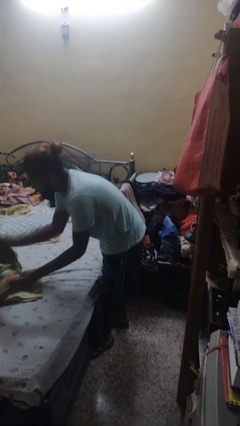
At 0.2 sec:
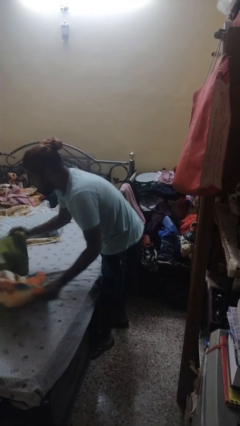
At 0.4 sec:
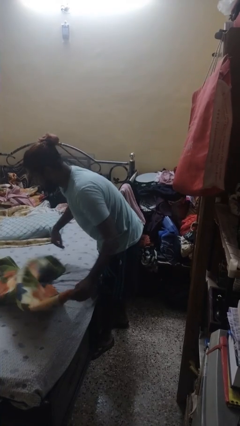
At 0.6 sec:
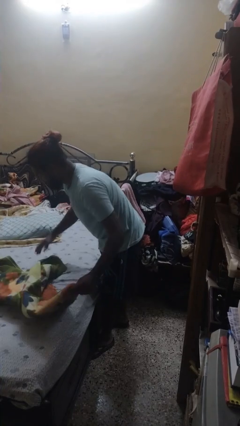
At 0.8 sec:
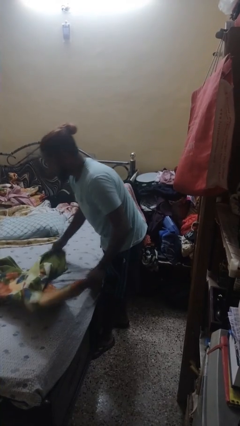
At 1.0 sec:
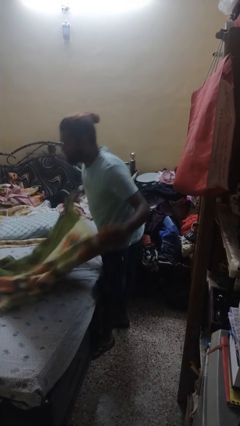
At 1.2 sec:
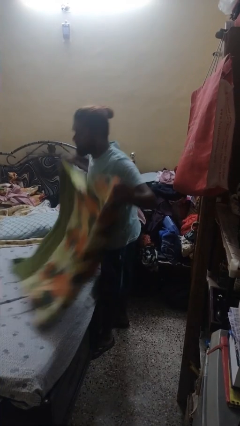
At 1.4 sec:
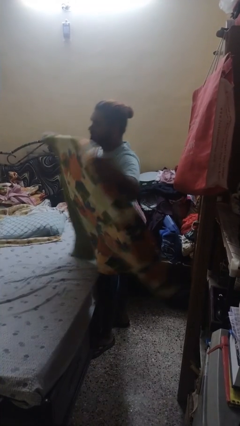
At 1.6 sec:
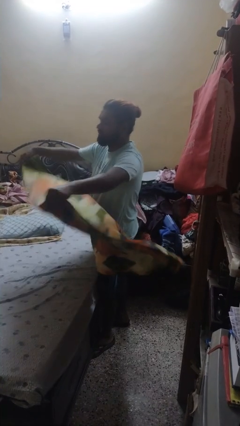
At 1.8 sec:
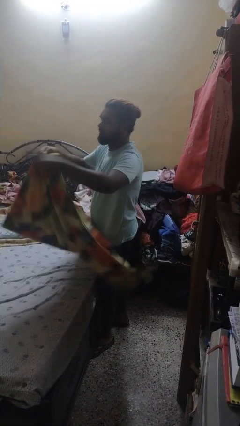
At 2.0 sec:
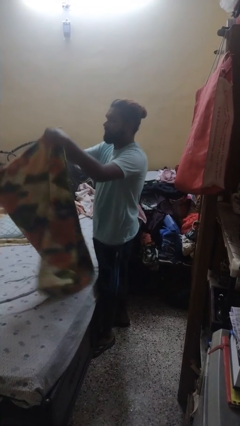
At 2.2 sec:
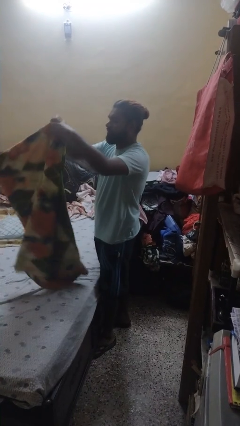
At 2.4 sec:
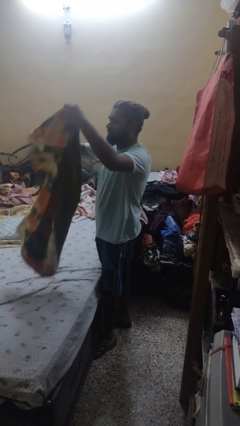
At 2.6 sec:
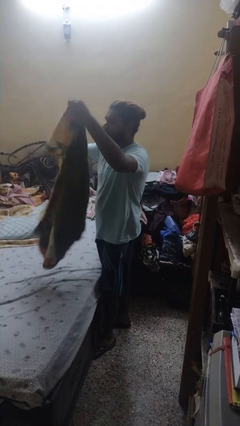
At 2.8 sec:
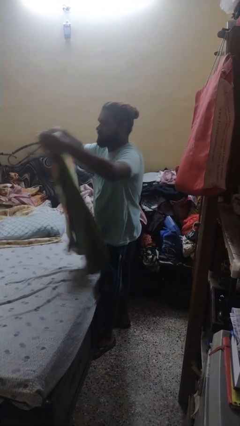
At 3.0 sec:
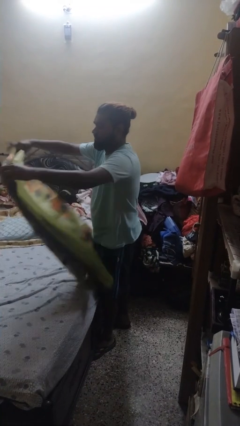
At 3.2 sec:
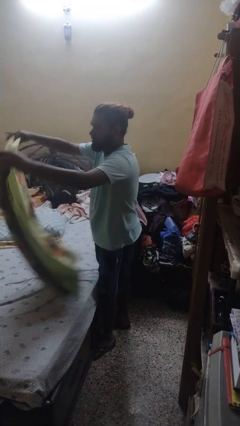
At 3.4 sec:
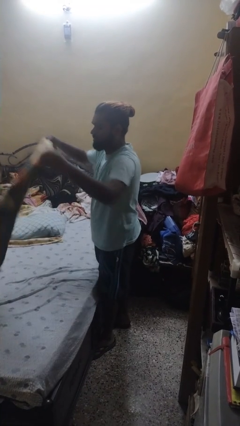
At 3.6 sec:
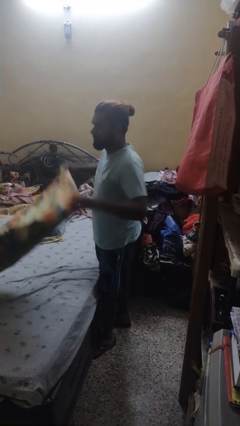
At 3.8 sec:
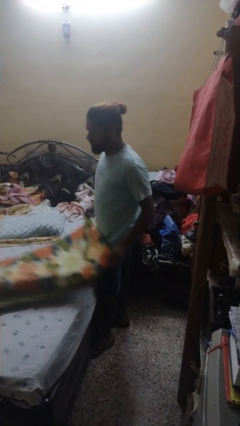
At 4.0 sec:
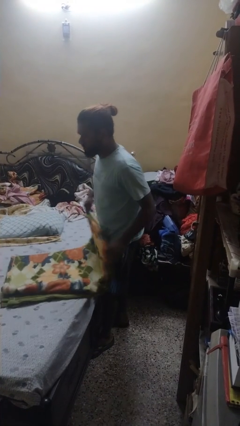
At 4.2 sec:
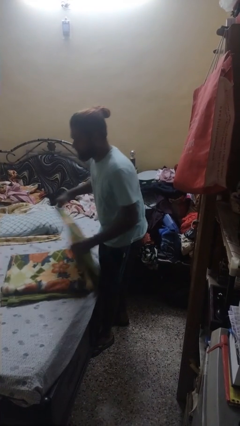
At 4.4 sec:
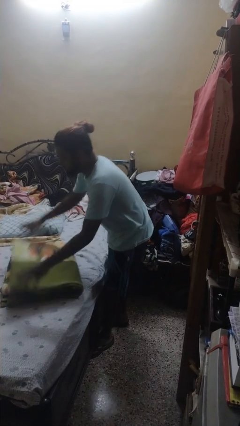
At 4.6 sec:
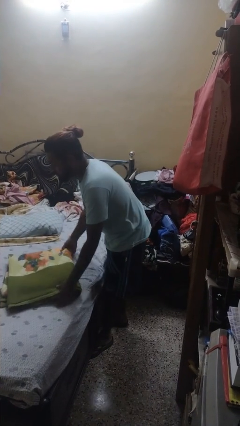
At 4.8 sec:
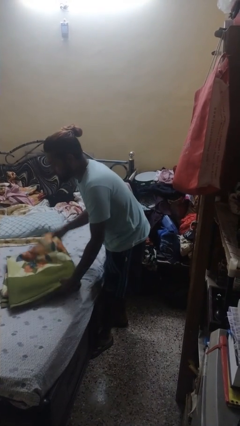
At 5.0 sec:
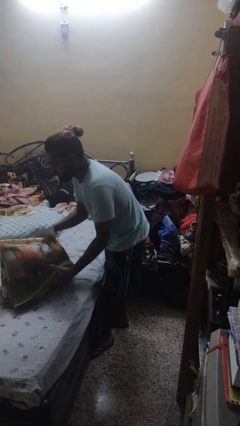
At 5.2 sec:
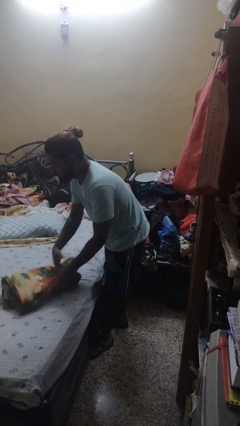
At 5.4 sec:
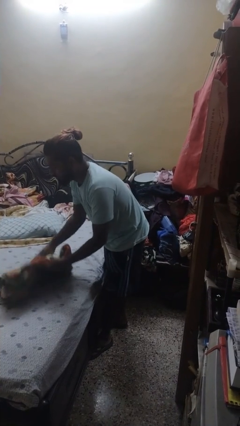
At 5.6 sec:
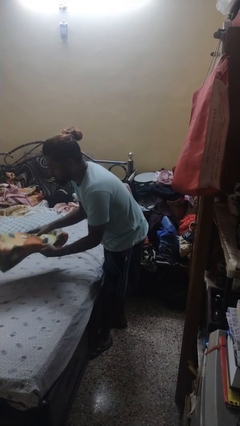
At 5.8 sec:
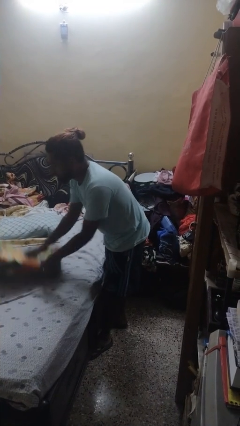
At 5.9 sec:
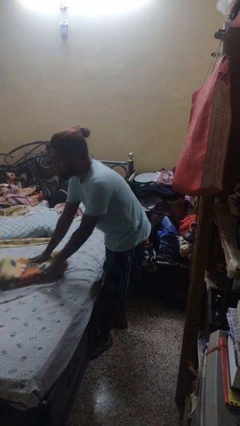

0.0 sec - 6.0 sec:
person folds blanket

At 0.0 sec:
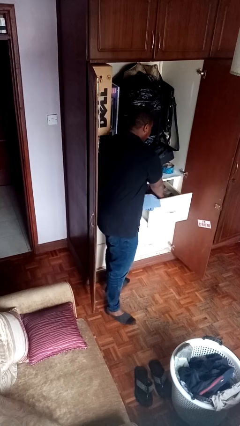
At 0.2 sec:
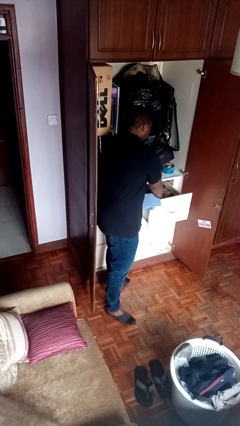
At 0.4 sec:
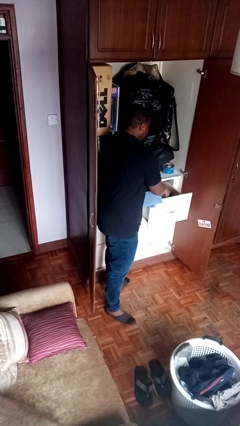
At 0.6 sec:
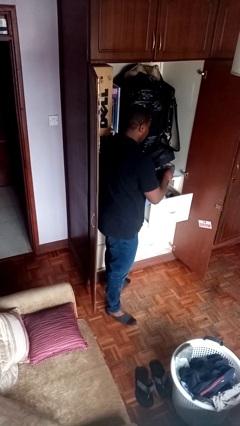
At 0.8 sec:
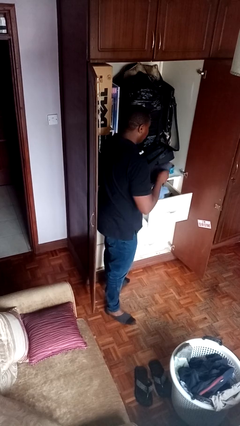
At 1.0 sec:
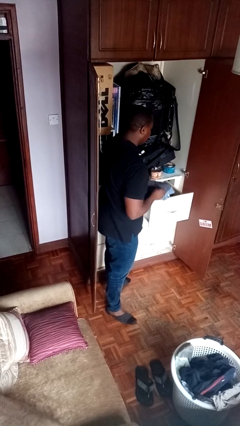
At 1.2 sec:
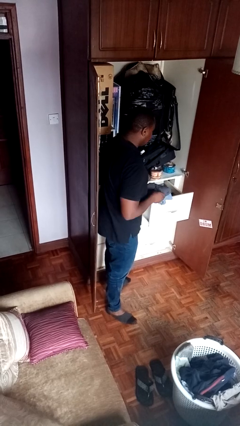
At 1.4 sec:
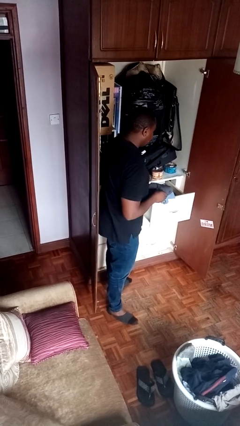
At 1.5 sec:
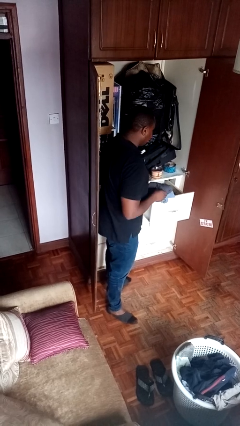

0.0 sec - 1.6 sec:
person takes clothes from dresser

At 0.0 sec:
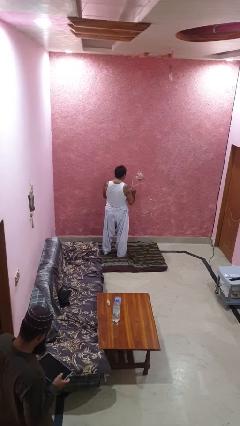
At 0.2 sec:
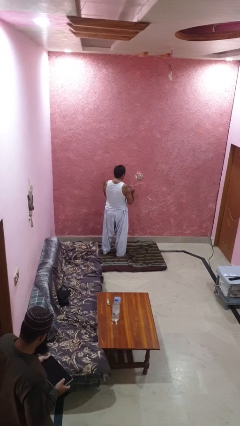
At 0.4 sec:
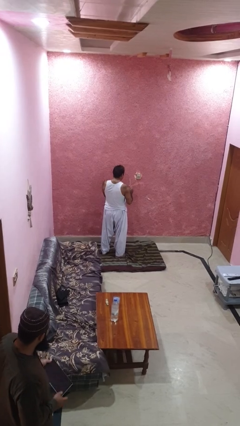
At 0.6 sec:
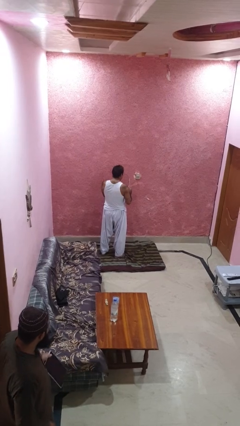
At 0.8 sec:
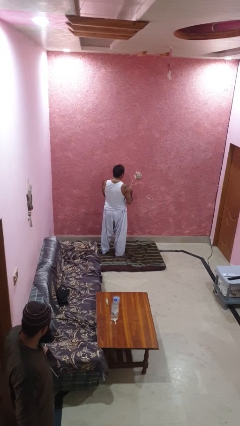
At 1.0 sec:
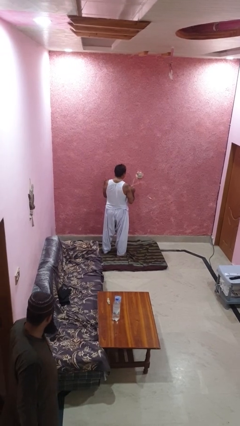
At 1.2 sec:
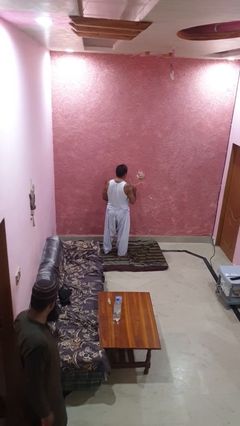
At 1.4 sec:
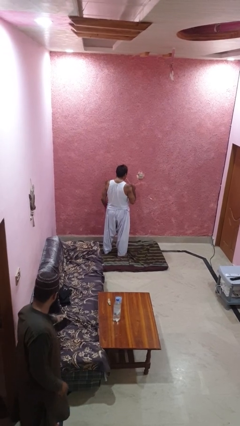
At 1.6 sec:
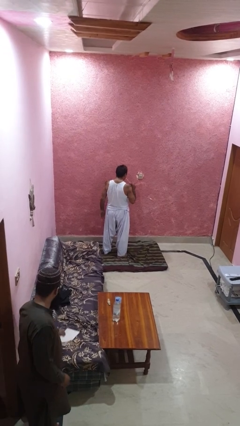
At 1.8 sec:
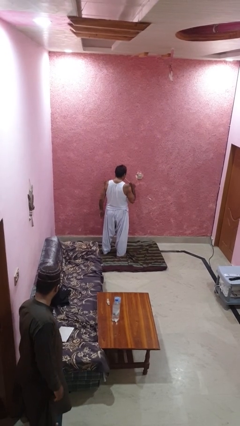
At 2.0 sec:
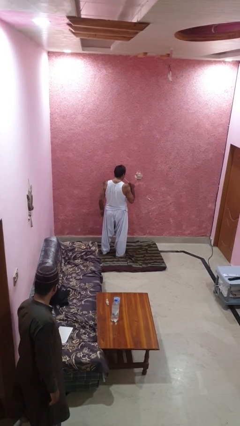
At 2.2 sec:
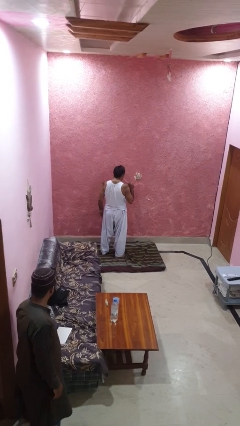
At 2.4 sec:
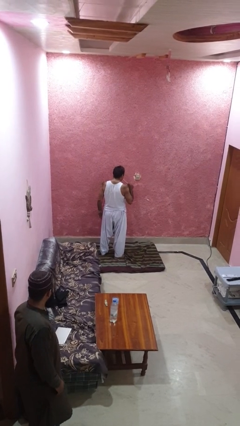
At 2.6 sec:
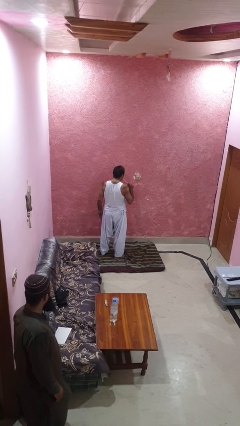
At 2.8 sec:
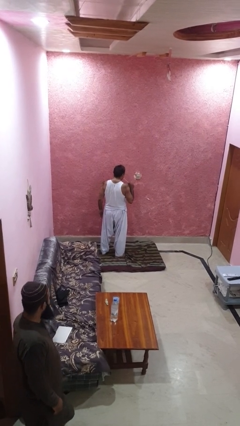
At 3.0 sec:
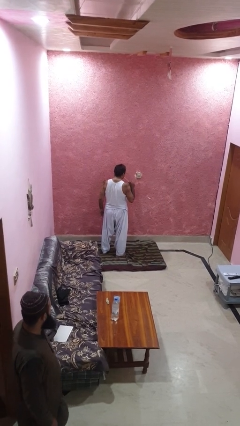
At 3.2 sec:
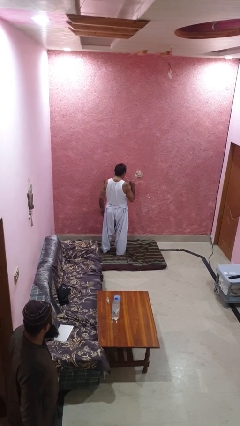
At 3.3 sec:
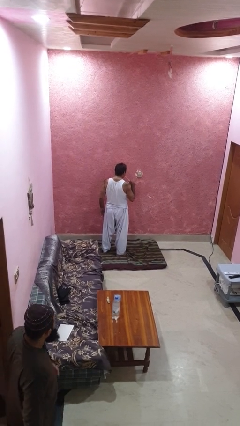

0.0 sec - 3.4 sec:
person drinks from straw

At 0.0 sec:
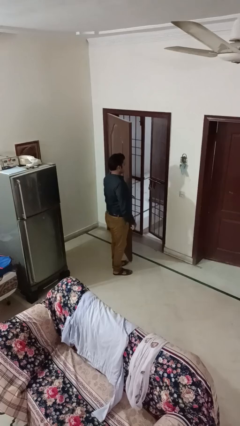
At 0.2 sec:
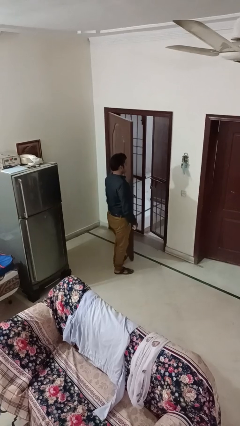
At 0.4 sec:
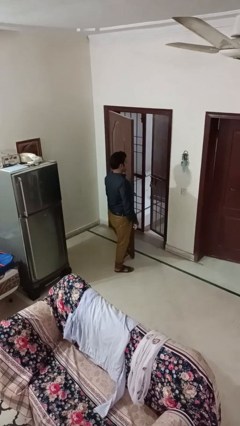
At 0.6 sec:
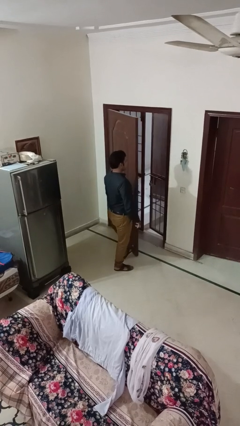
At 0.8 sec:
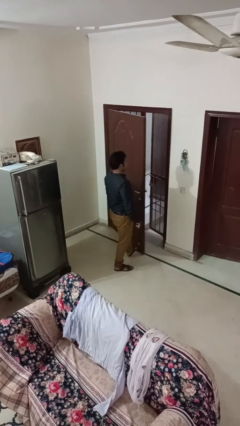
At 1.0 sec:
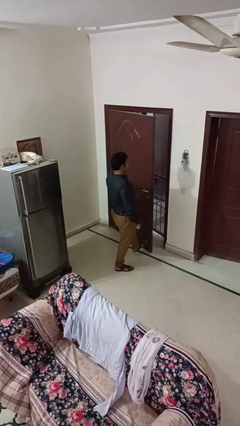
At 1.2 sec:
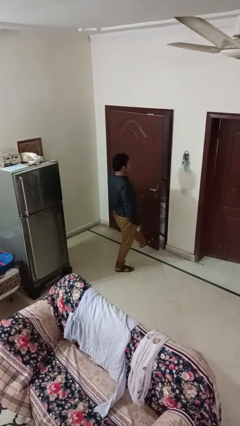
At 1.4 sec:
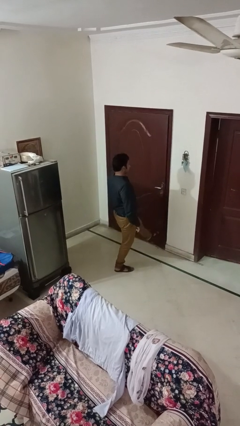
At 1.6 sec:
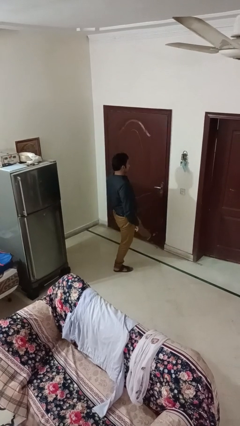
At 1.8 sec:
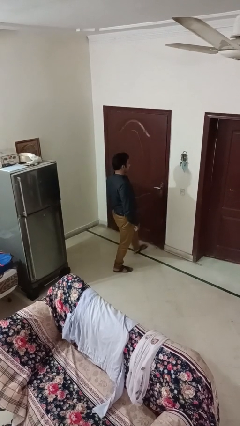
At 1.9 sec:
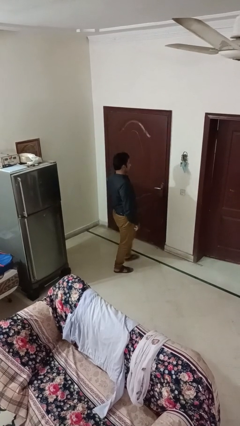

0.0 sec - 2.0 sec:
person closes door with foot

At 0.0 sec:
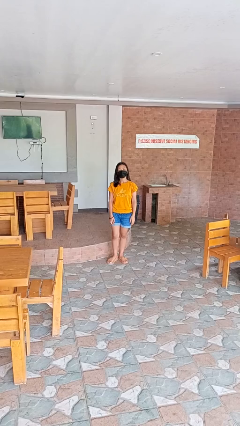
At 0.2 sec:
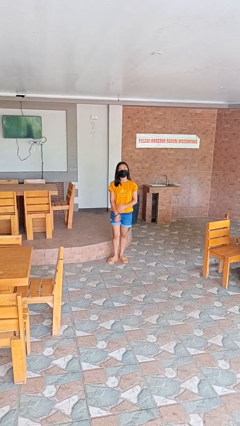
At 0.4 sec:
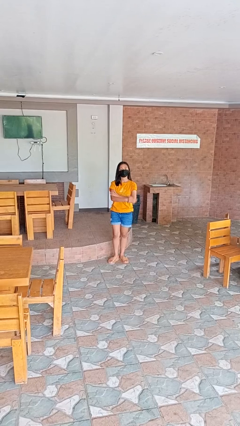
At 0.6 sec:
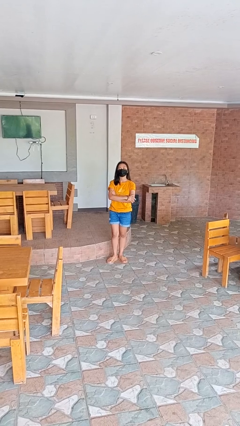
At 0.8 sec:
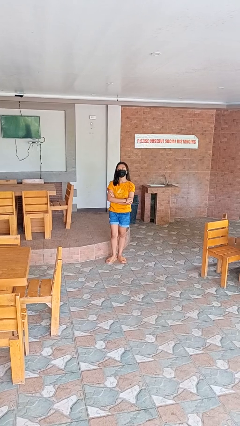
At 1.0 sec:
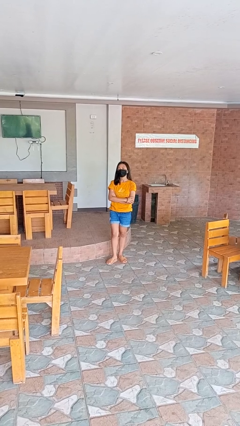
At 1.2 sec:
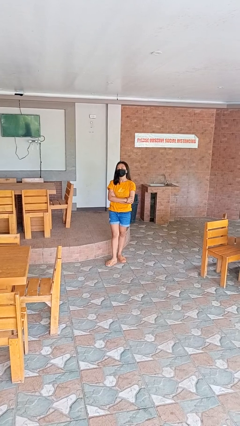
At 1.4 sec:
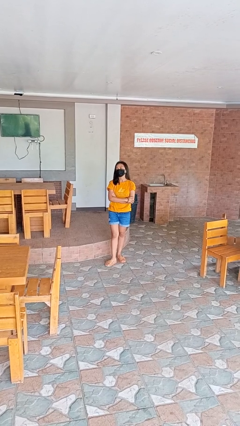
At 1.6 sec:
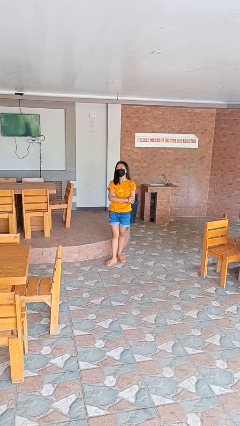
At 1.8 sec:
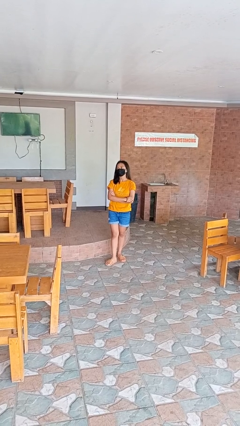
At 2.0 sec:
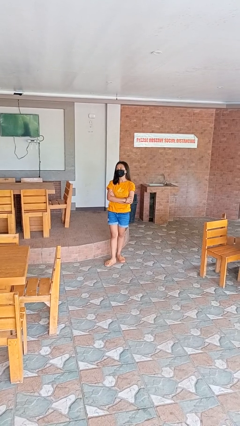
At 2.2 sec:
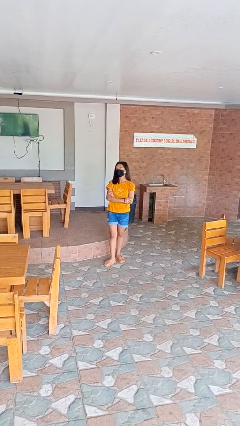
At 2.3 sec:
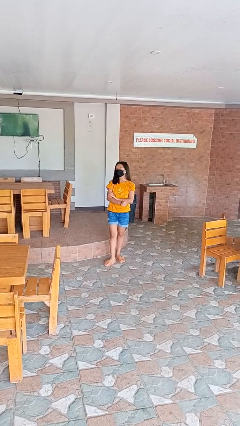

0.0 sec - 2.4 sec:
person crosses arms

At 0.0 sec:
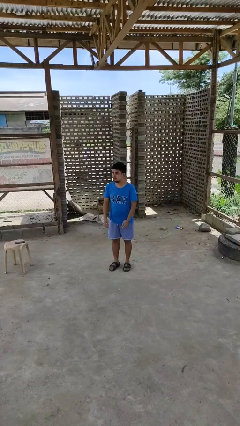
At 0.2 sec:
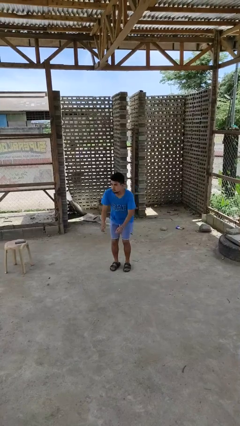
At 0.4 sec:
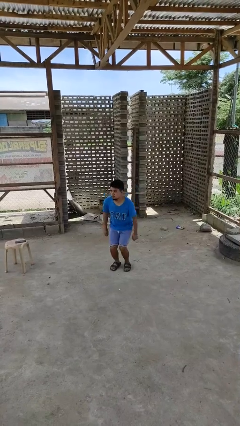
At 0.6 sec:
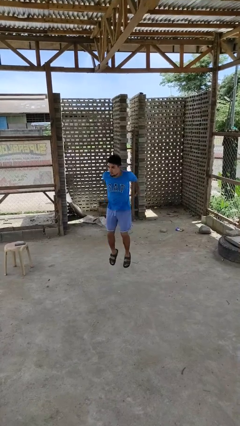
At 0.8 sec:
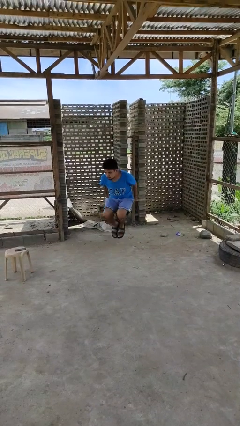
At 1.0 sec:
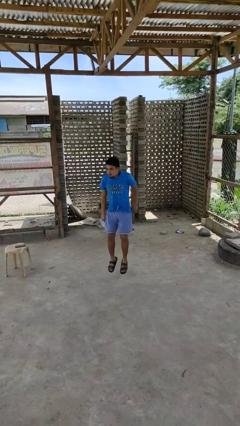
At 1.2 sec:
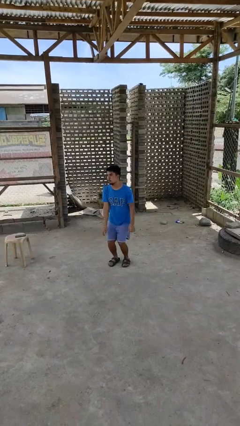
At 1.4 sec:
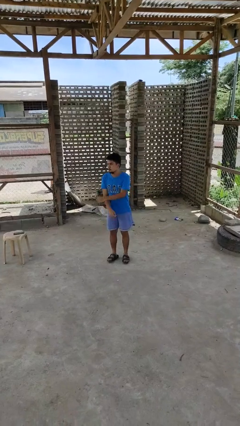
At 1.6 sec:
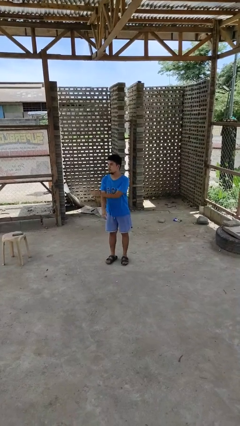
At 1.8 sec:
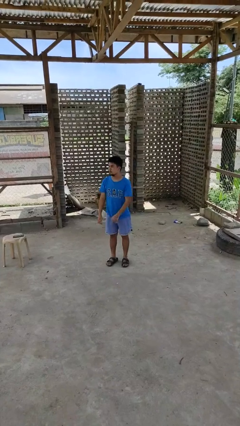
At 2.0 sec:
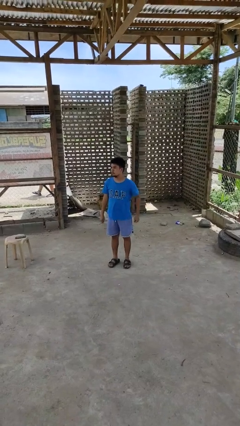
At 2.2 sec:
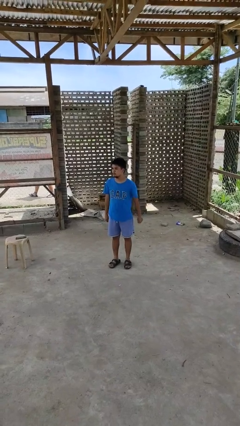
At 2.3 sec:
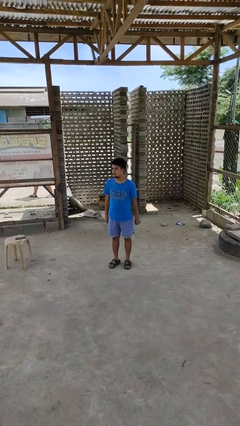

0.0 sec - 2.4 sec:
person jumps
